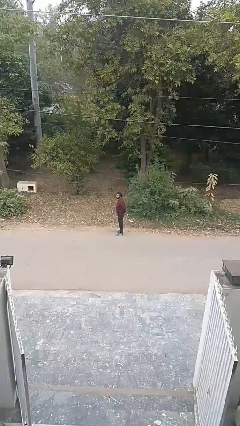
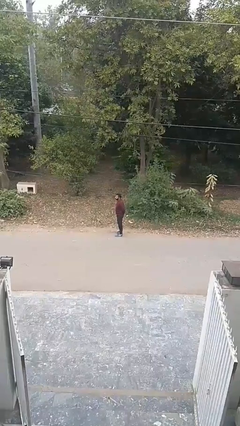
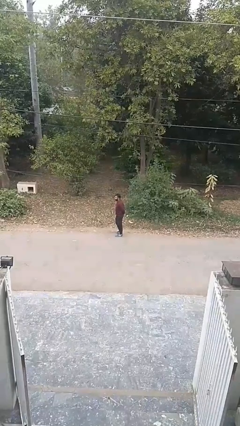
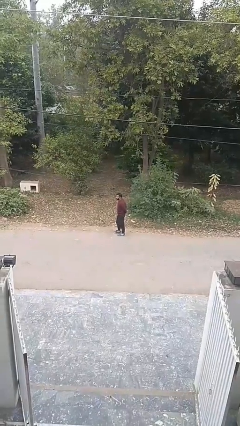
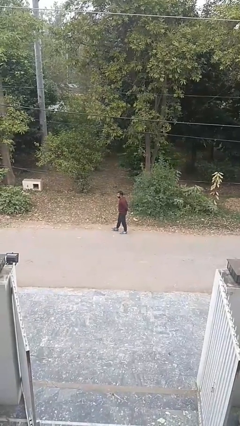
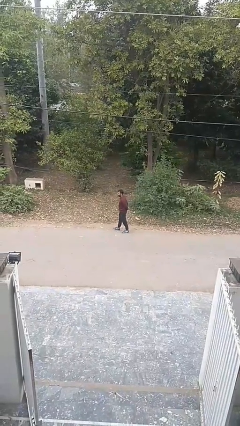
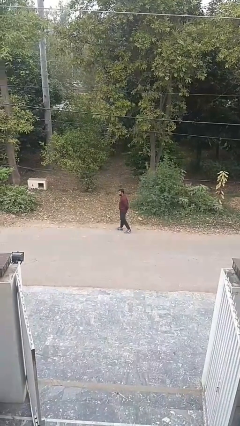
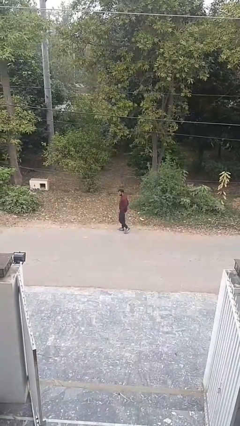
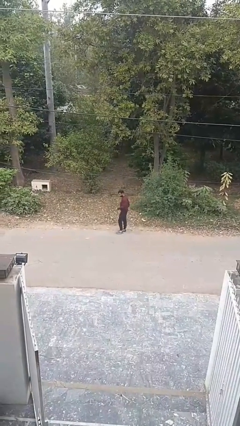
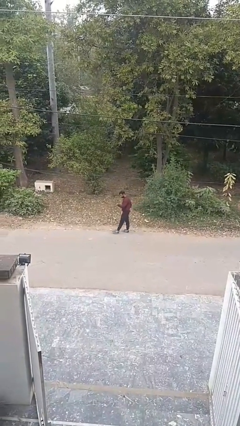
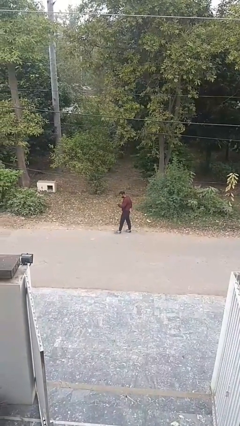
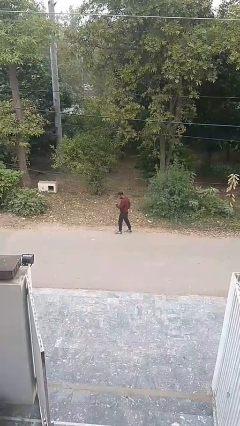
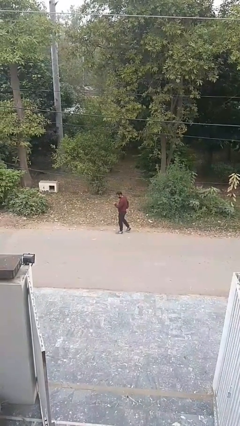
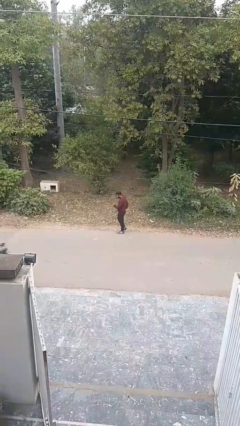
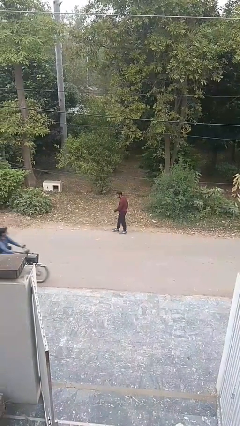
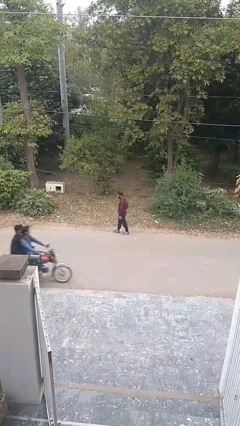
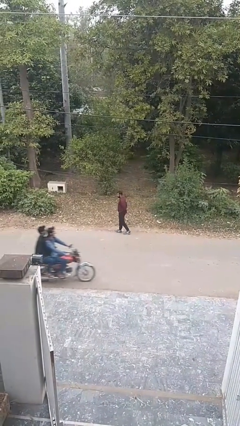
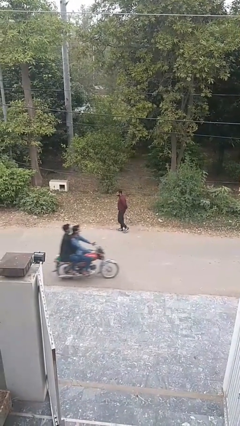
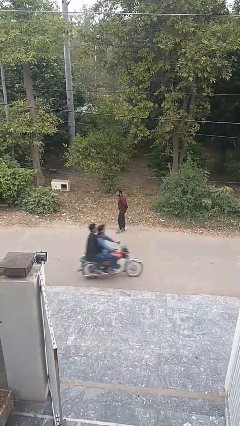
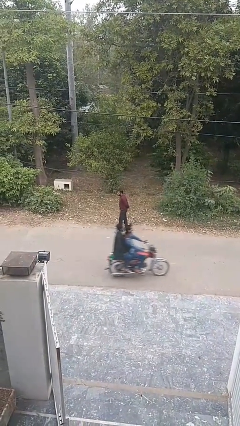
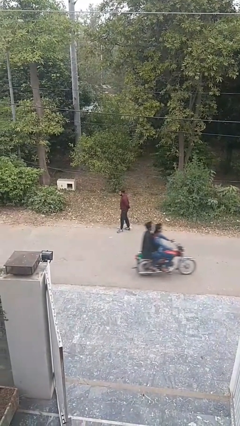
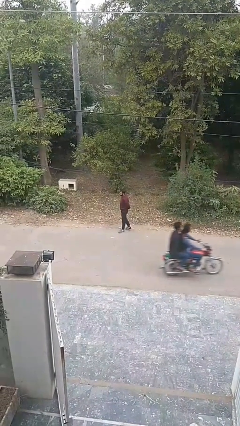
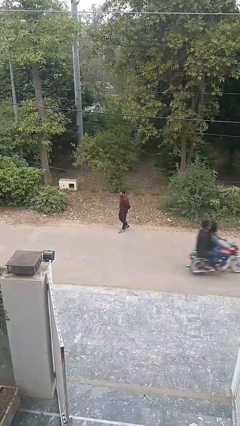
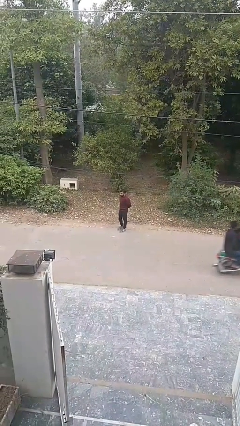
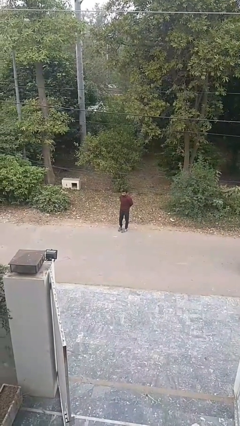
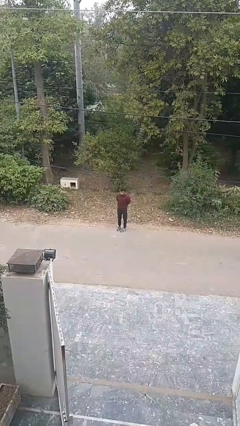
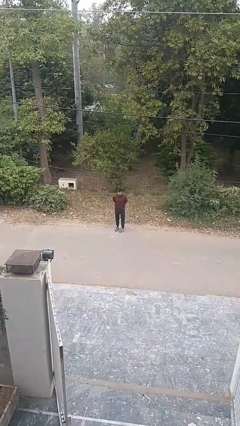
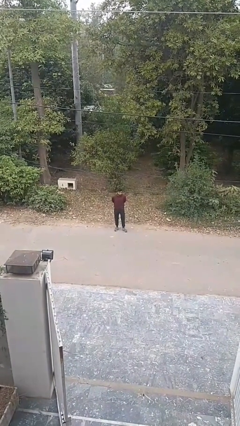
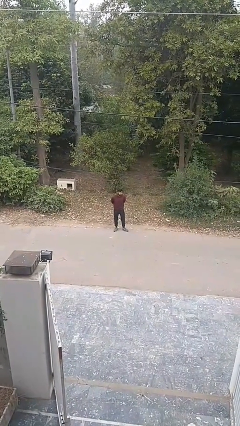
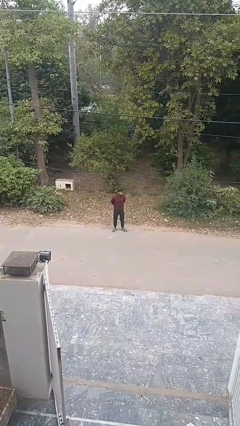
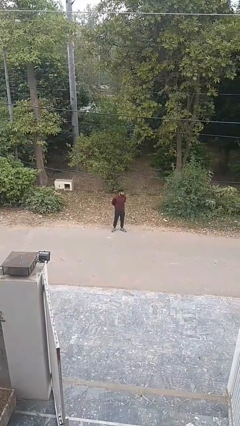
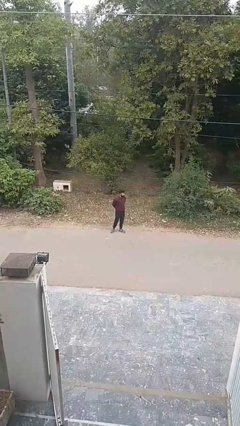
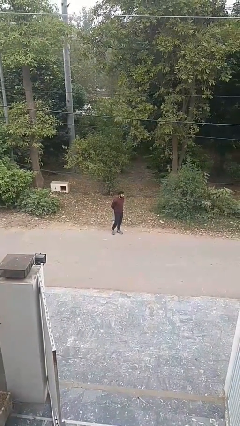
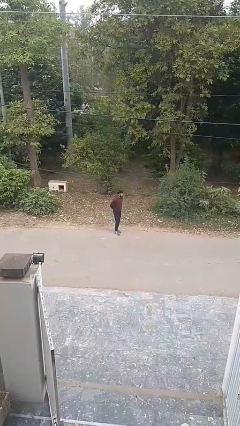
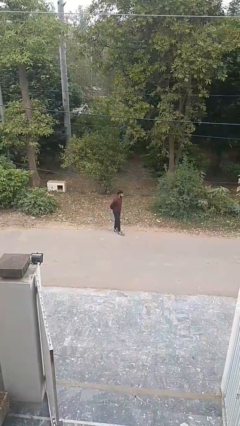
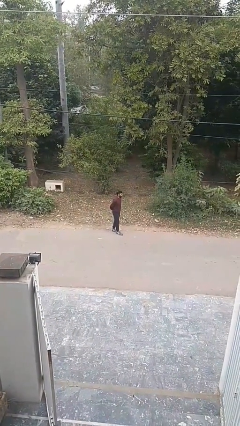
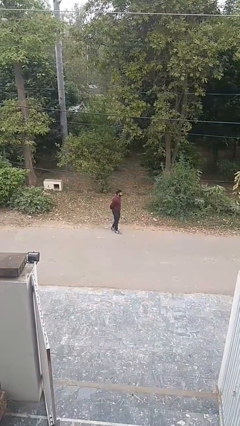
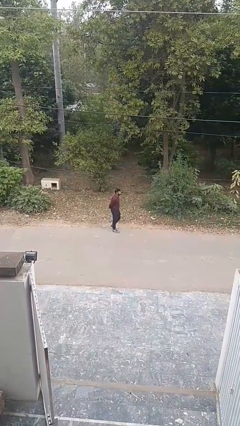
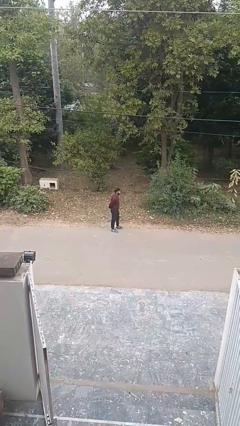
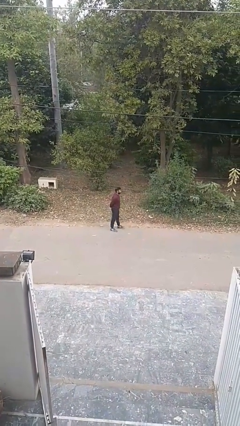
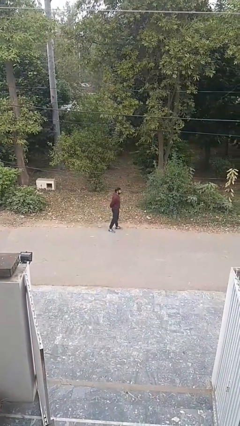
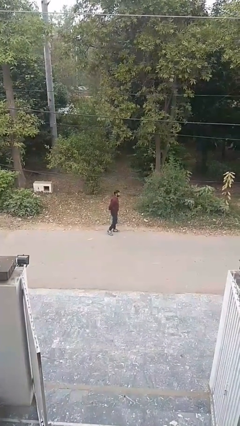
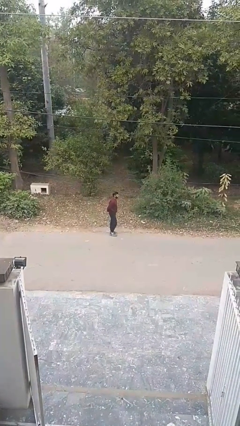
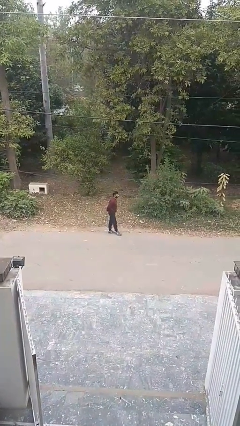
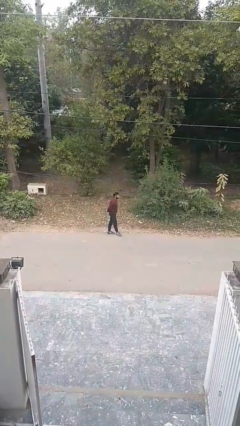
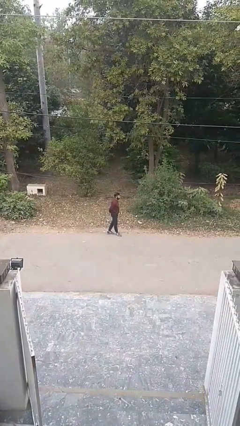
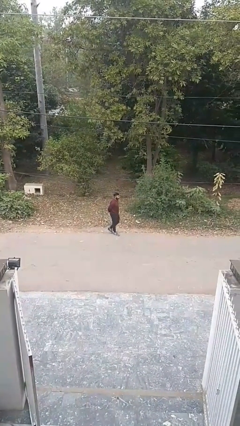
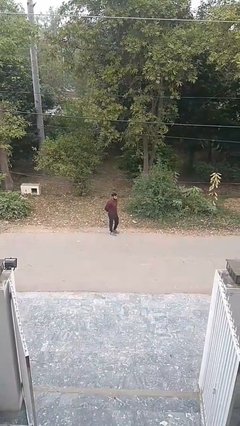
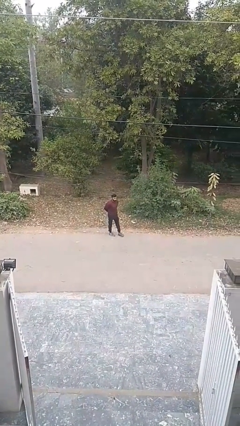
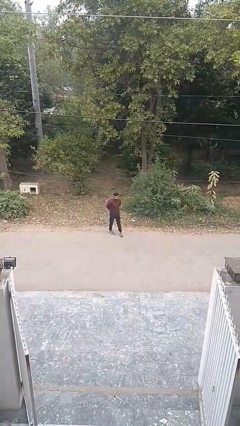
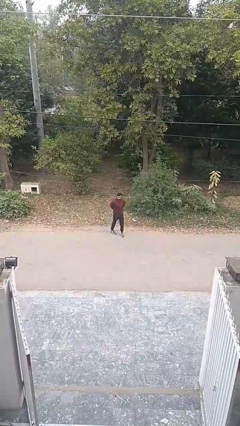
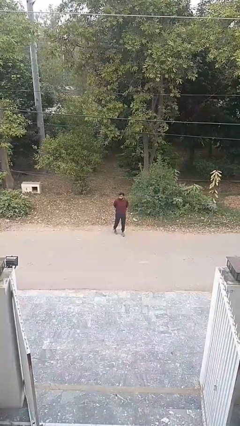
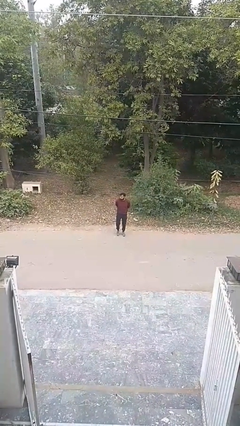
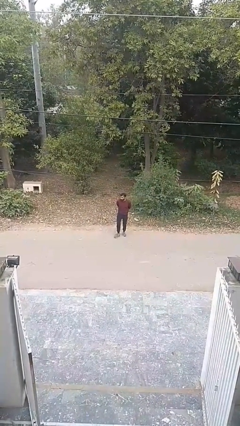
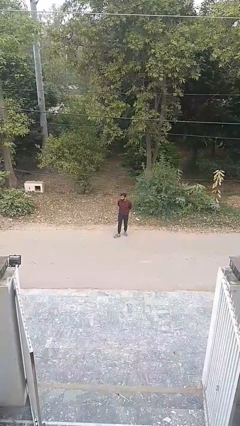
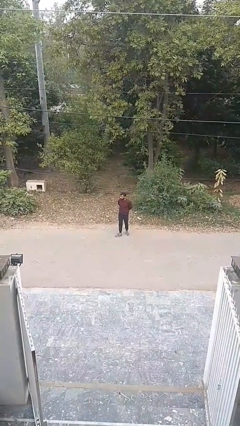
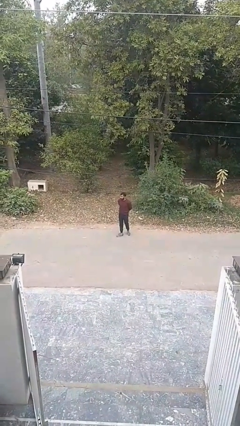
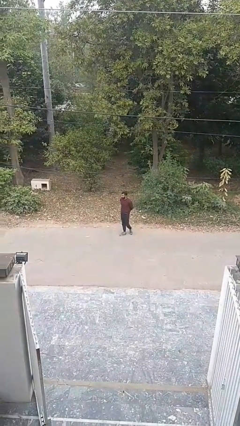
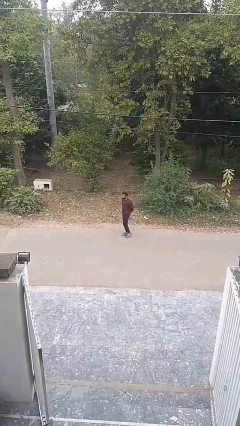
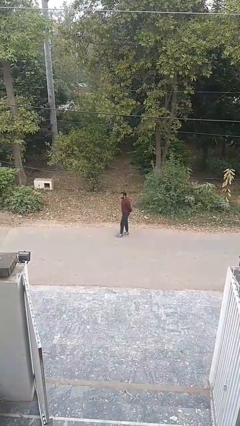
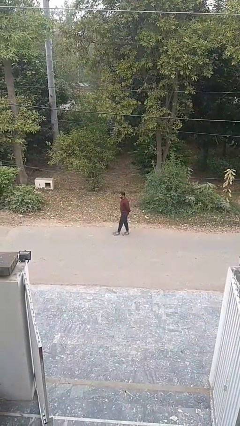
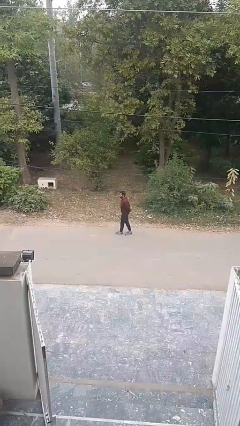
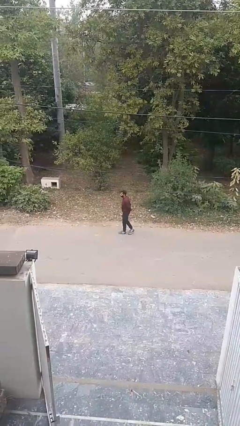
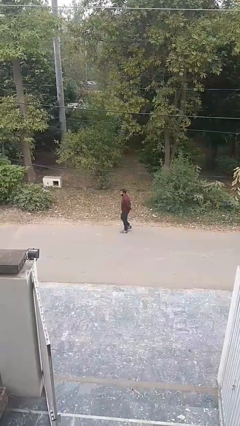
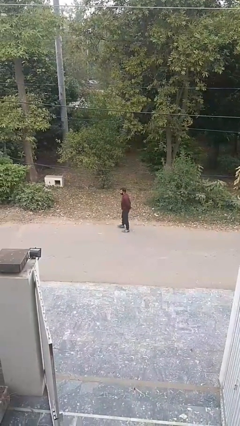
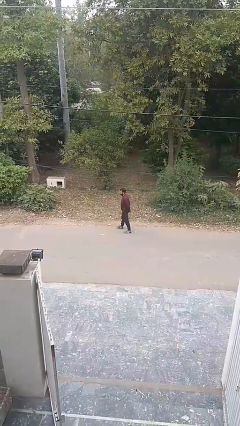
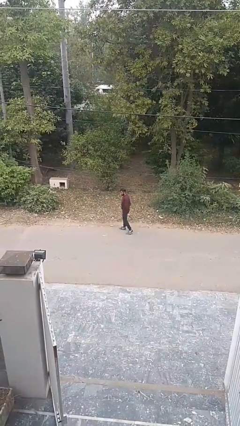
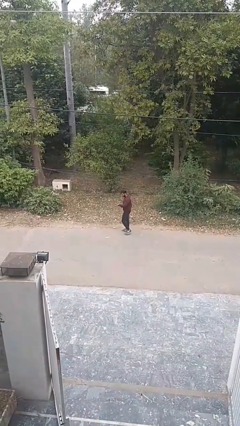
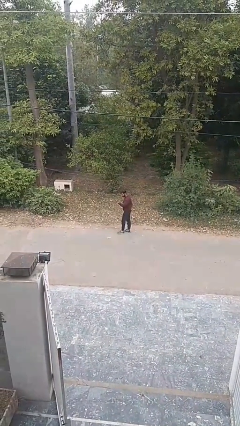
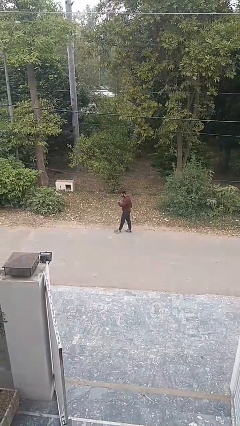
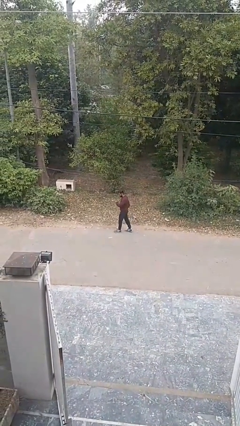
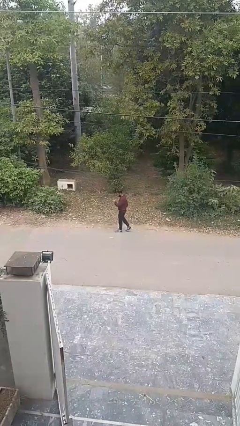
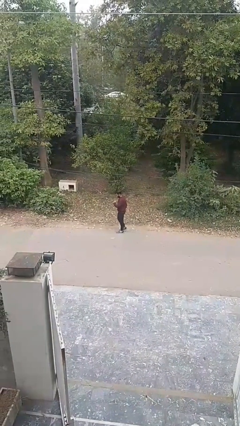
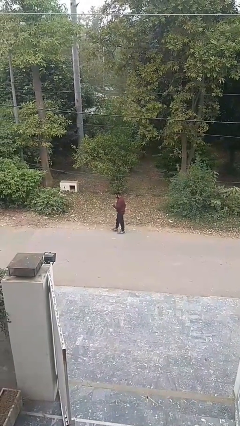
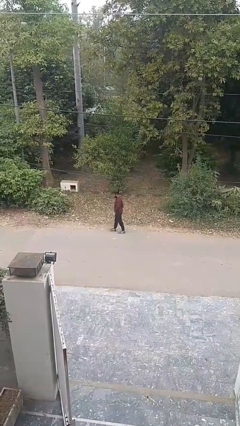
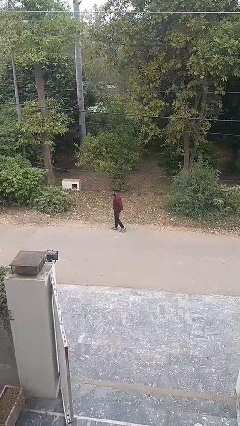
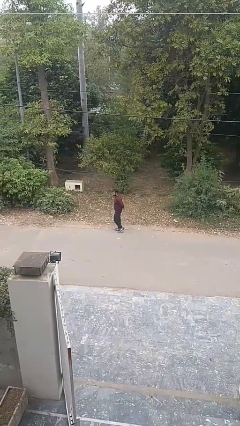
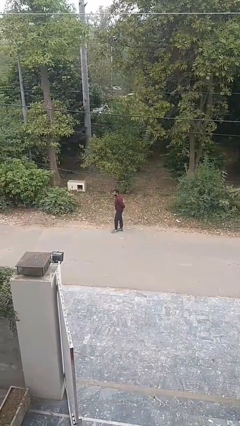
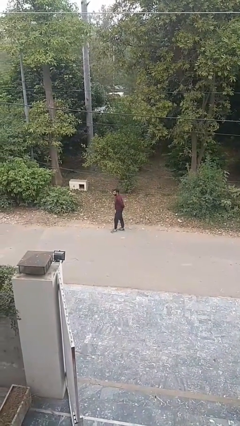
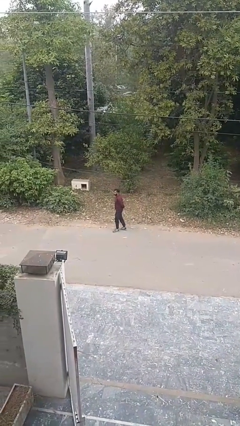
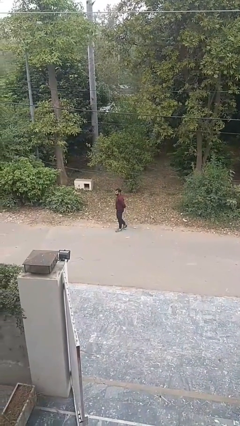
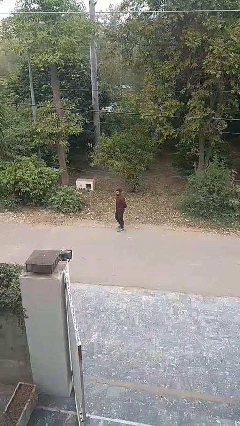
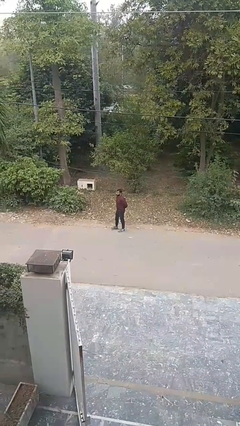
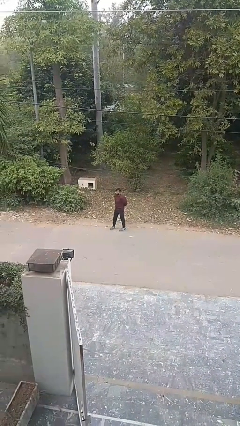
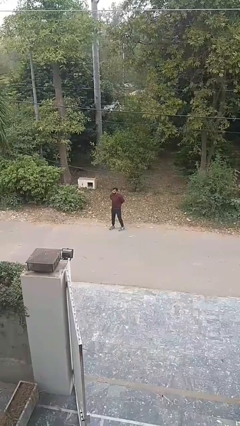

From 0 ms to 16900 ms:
person walks

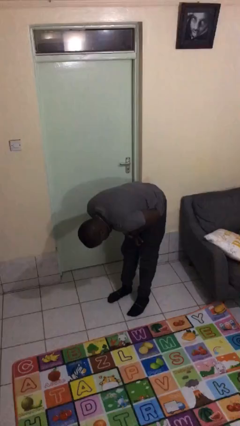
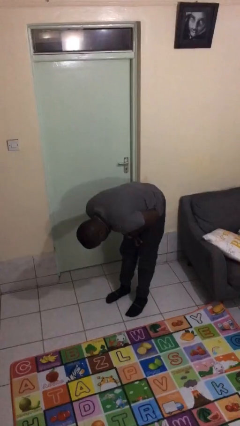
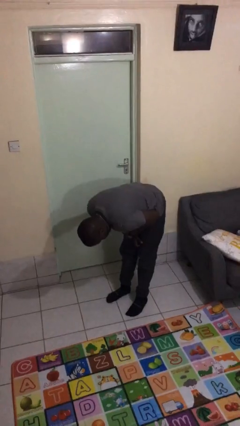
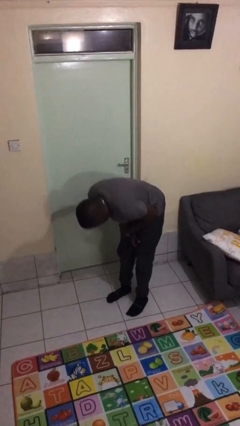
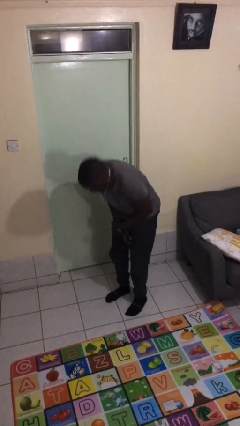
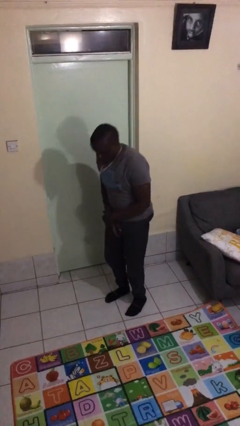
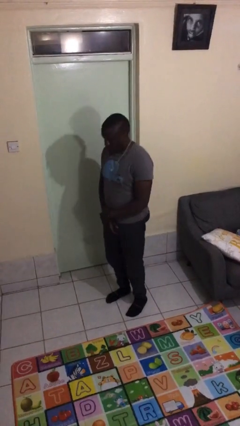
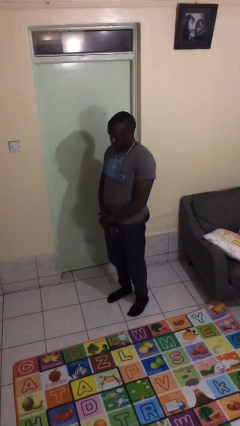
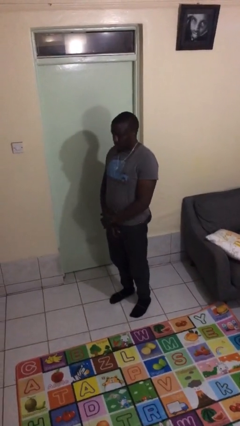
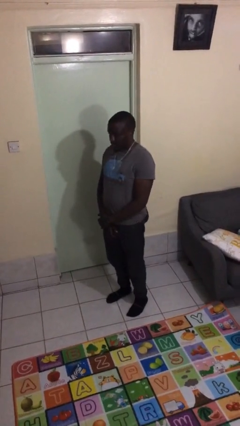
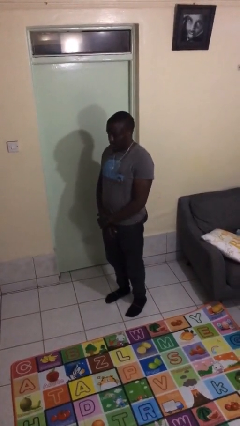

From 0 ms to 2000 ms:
person bows
